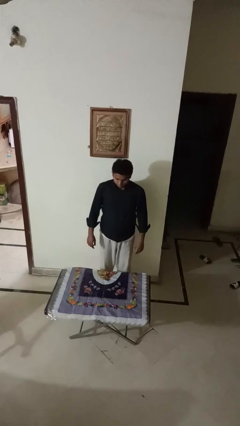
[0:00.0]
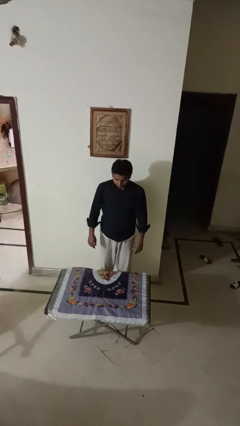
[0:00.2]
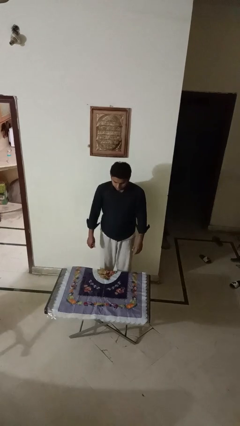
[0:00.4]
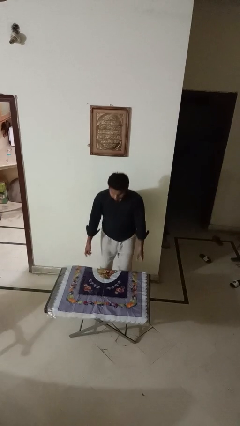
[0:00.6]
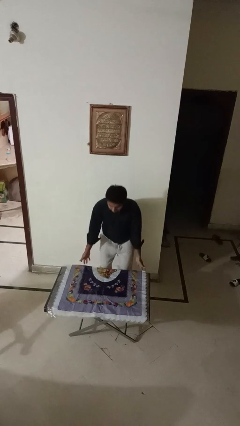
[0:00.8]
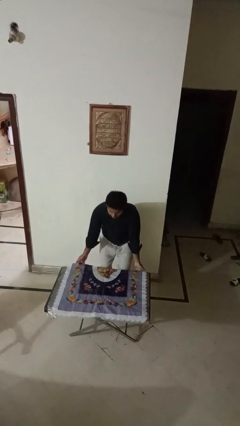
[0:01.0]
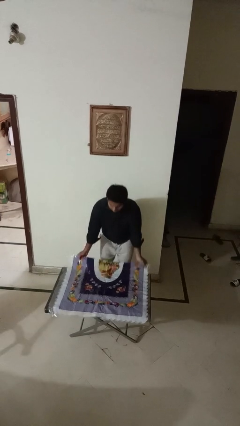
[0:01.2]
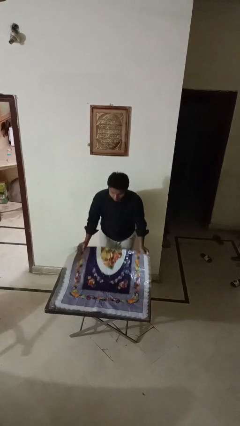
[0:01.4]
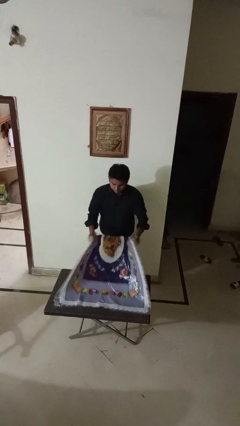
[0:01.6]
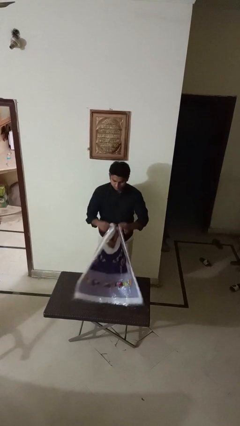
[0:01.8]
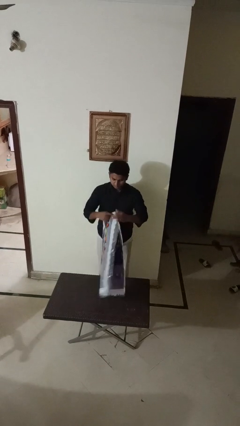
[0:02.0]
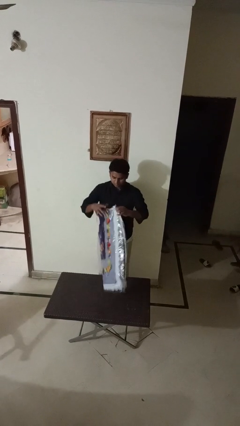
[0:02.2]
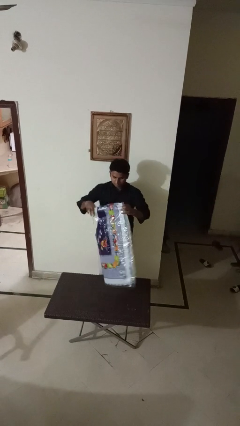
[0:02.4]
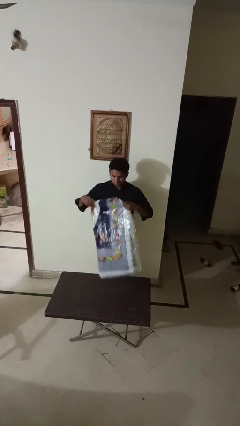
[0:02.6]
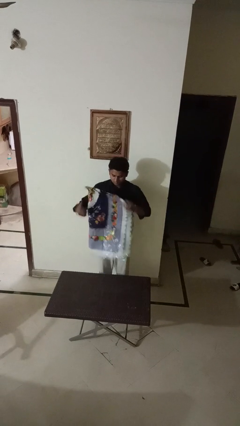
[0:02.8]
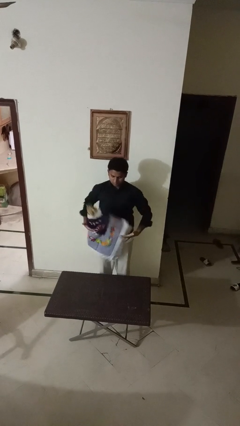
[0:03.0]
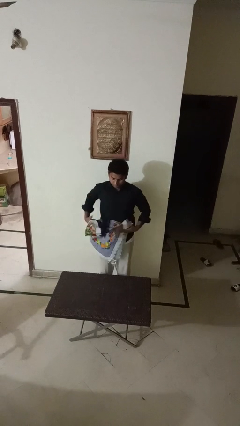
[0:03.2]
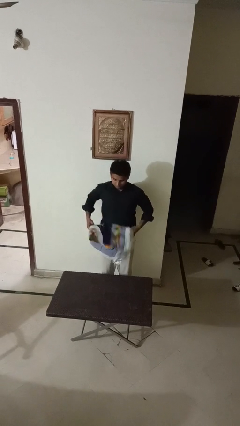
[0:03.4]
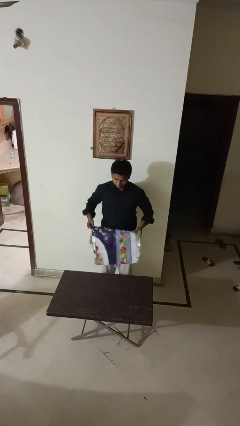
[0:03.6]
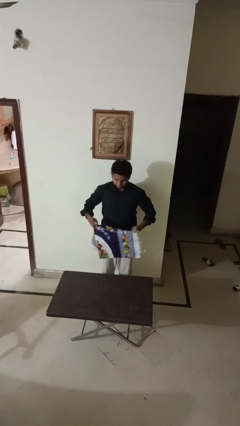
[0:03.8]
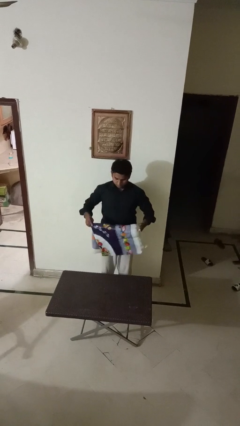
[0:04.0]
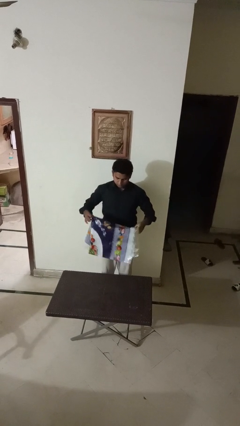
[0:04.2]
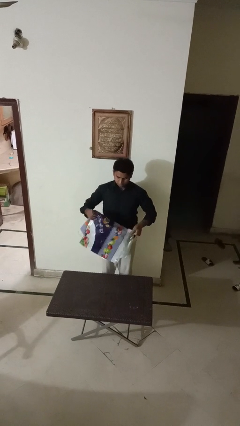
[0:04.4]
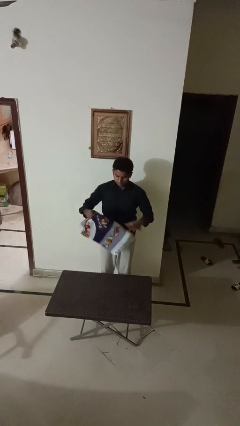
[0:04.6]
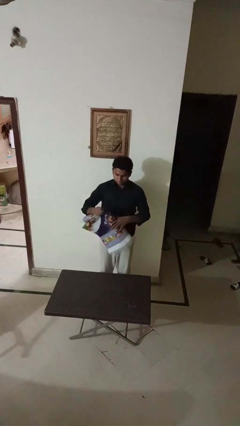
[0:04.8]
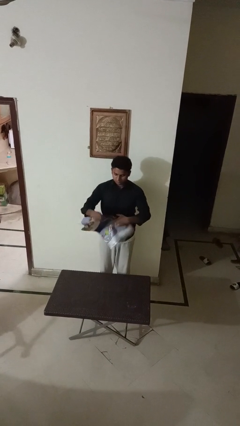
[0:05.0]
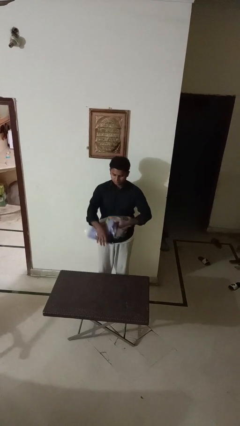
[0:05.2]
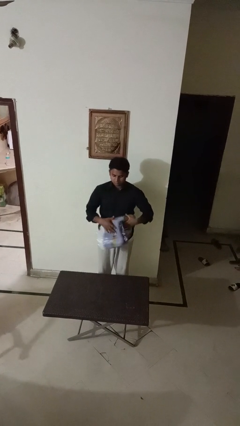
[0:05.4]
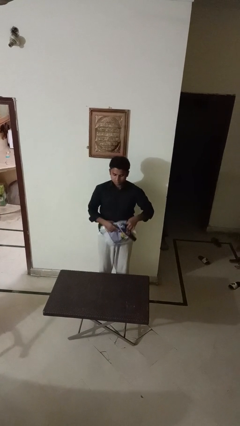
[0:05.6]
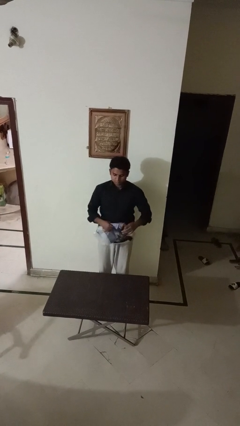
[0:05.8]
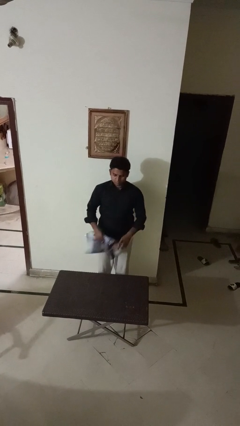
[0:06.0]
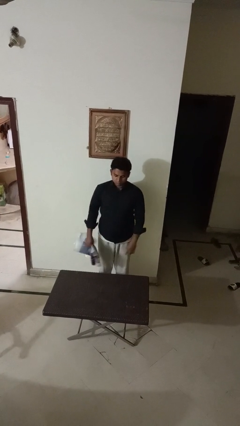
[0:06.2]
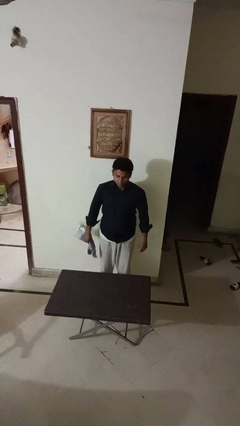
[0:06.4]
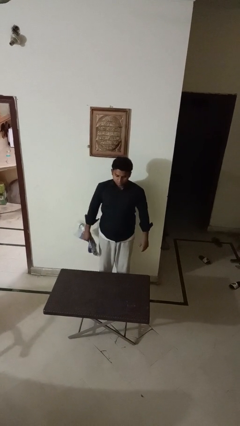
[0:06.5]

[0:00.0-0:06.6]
person folds tablecloth

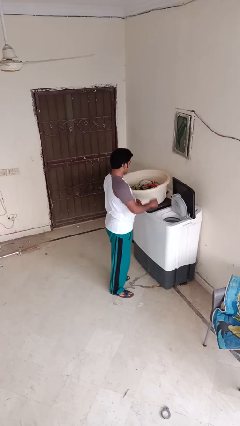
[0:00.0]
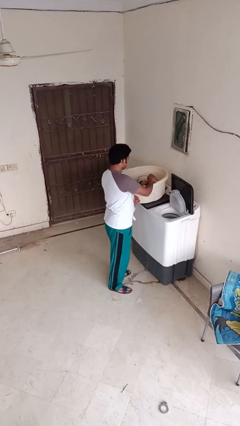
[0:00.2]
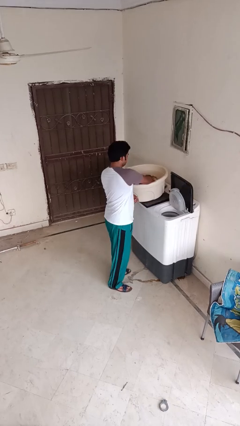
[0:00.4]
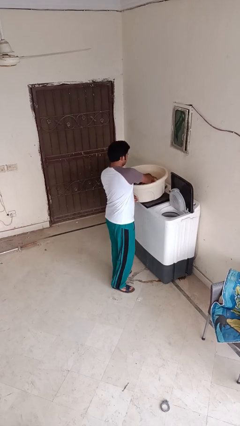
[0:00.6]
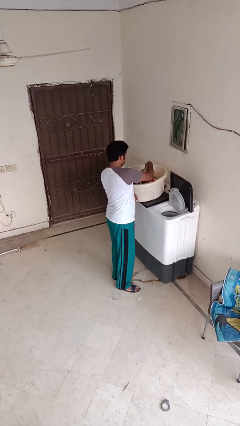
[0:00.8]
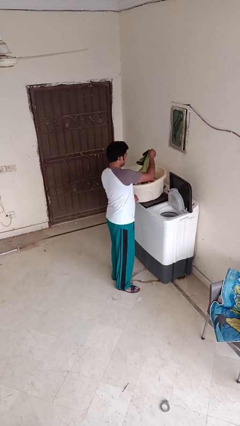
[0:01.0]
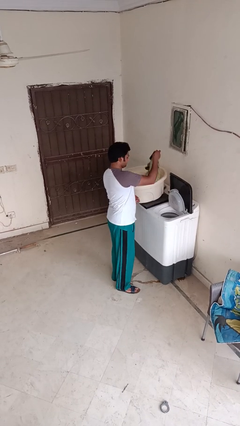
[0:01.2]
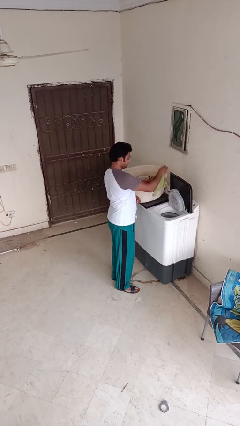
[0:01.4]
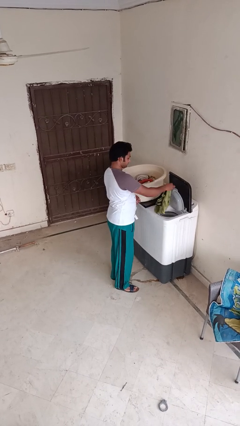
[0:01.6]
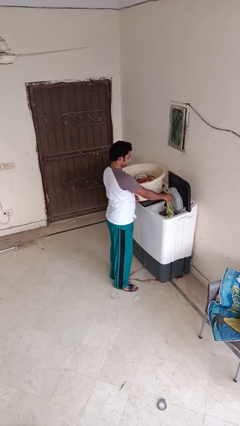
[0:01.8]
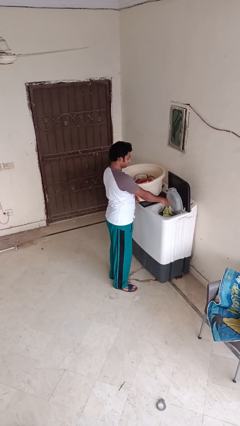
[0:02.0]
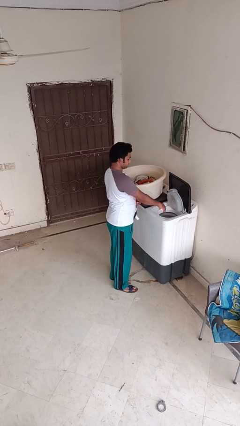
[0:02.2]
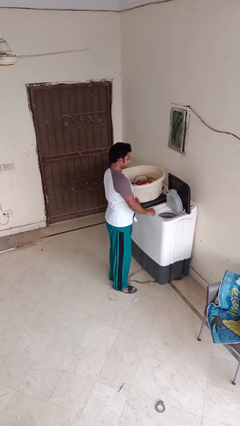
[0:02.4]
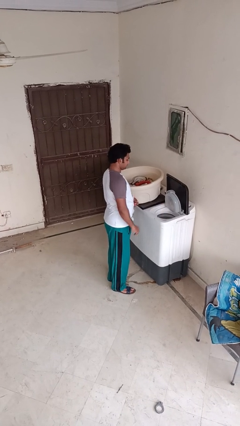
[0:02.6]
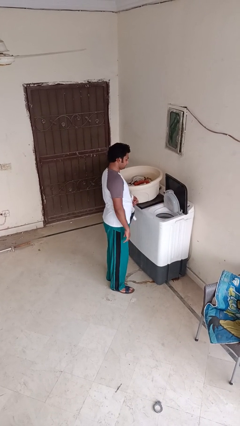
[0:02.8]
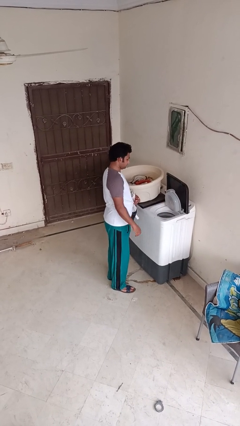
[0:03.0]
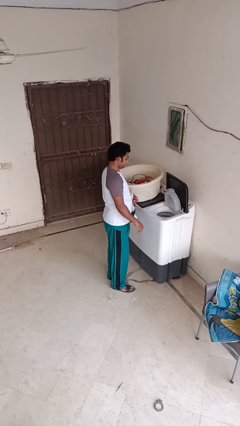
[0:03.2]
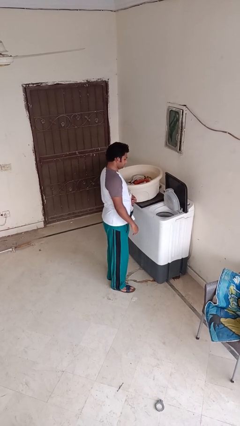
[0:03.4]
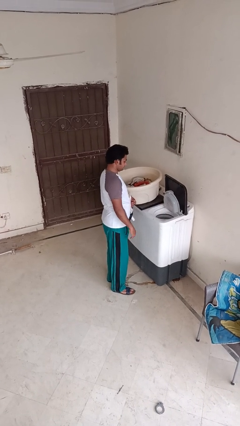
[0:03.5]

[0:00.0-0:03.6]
person loads dryer

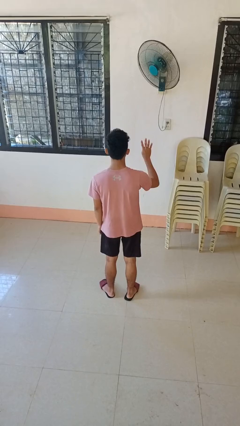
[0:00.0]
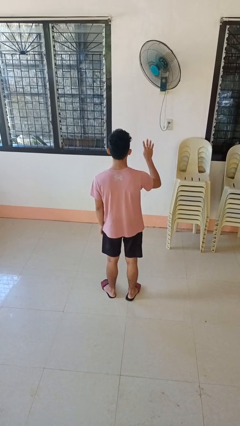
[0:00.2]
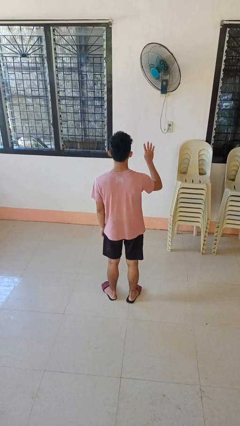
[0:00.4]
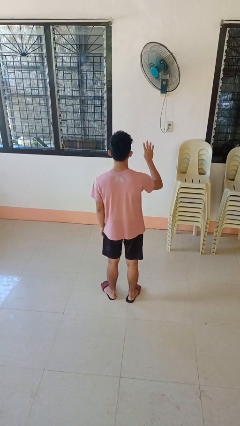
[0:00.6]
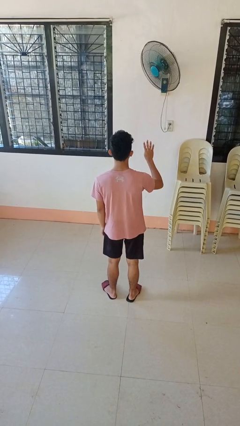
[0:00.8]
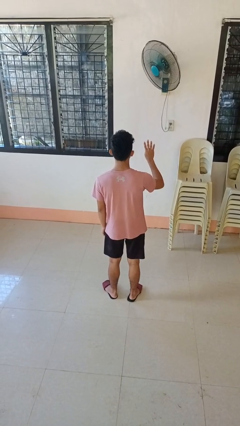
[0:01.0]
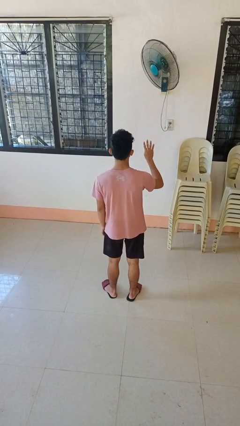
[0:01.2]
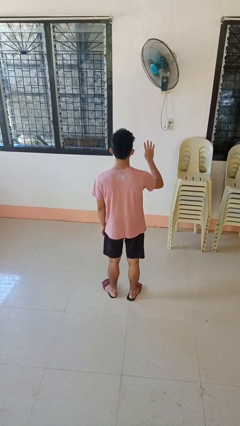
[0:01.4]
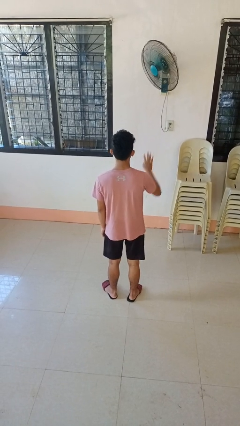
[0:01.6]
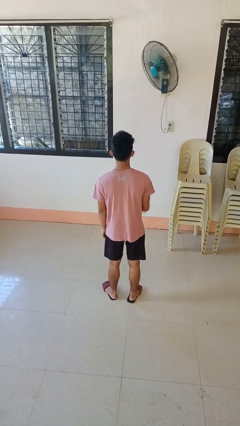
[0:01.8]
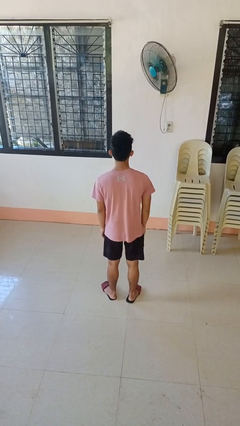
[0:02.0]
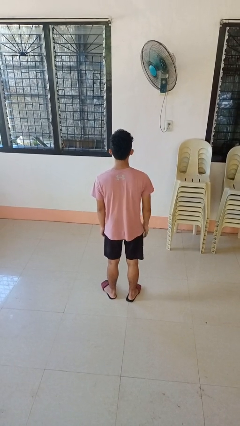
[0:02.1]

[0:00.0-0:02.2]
person gestures number four

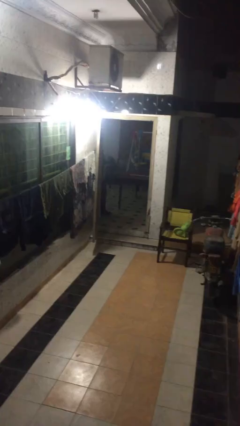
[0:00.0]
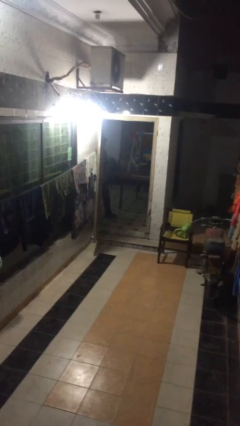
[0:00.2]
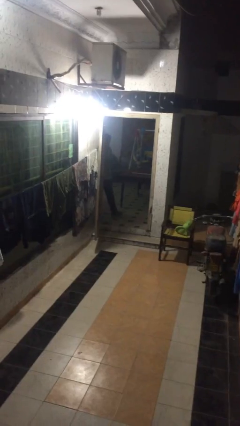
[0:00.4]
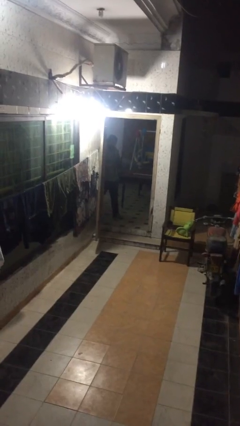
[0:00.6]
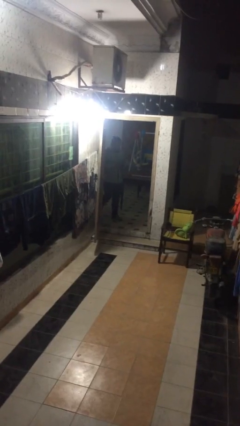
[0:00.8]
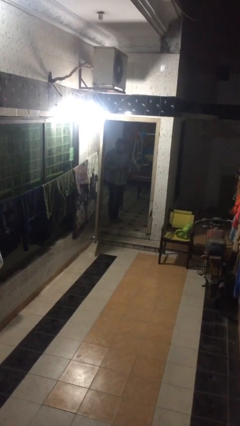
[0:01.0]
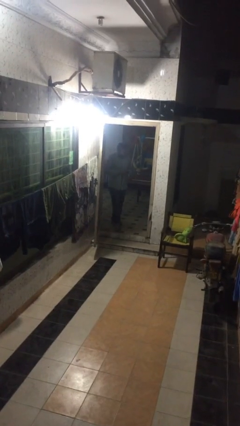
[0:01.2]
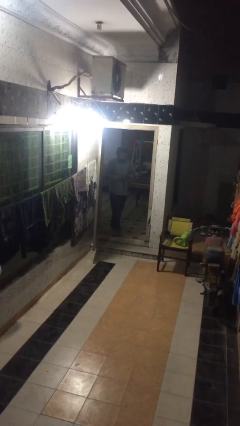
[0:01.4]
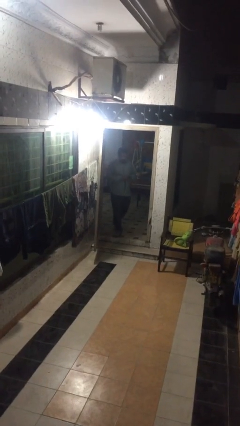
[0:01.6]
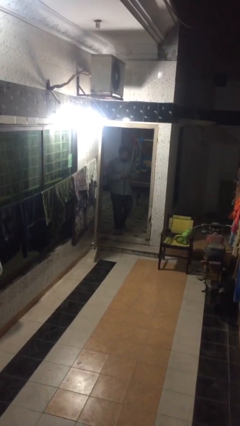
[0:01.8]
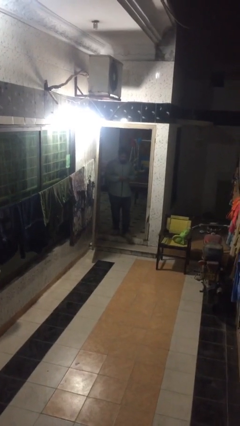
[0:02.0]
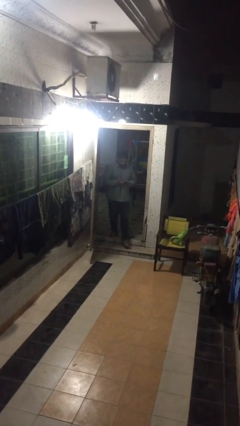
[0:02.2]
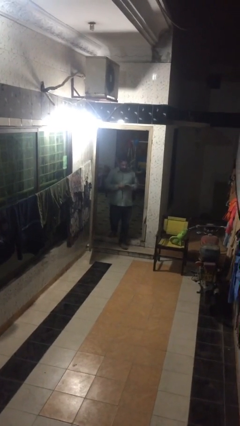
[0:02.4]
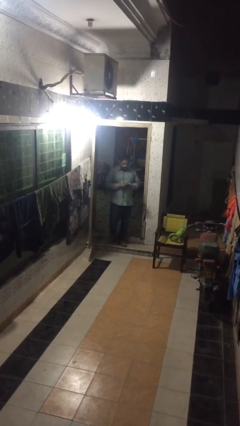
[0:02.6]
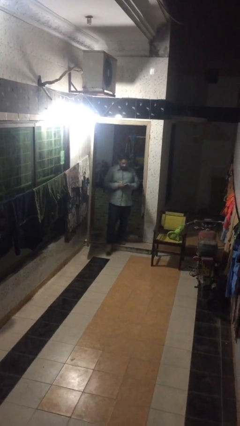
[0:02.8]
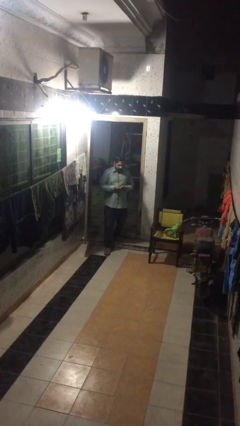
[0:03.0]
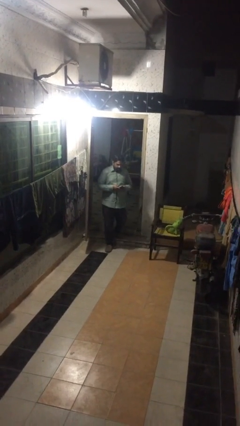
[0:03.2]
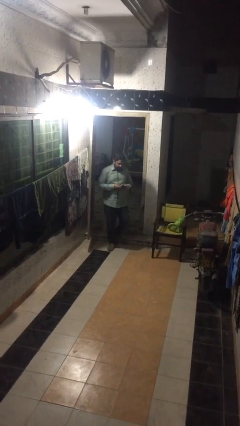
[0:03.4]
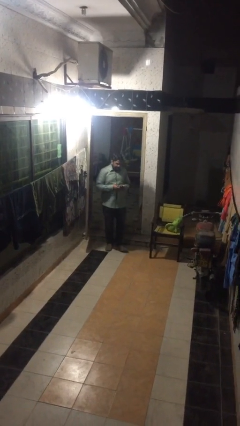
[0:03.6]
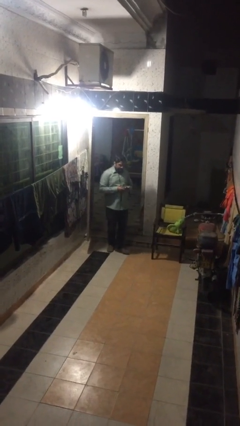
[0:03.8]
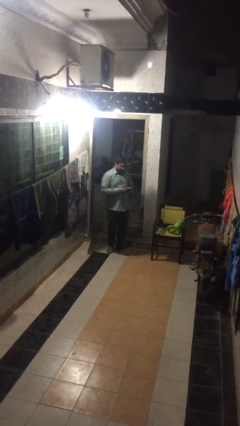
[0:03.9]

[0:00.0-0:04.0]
person enters scene through structure

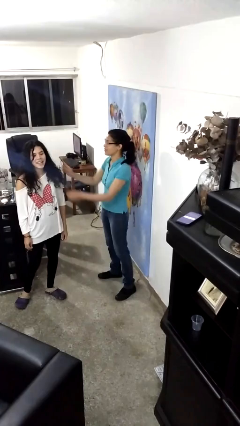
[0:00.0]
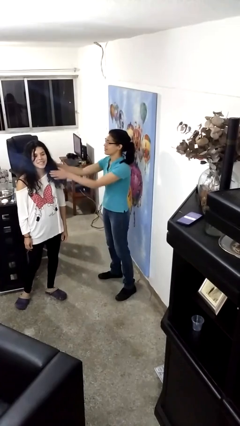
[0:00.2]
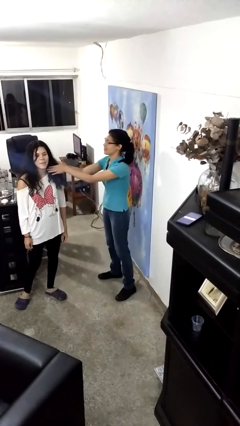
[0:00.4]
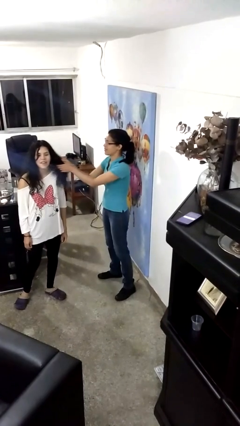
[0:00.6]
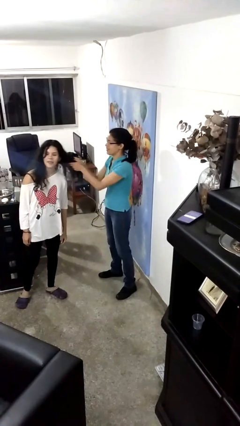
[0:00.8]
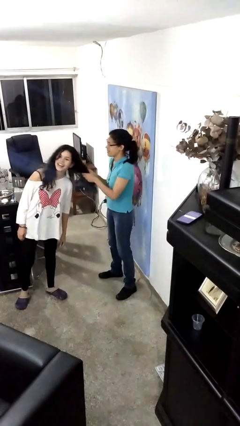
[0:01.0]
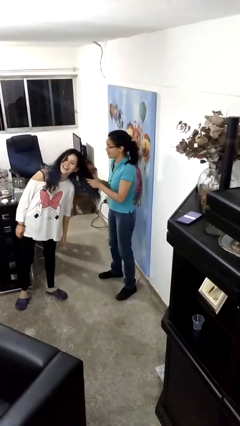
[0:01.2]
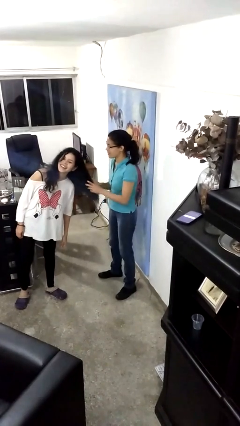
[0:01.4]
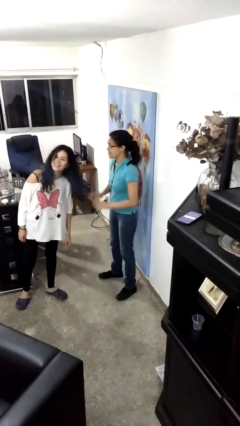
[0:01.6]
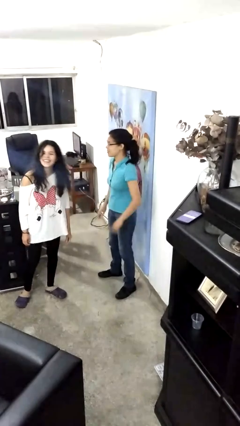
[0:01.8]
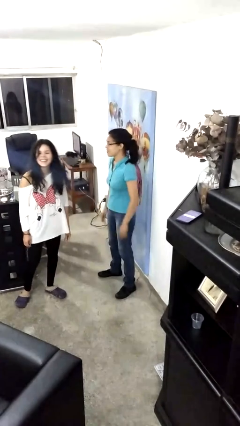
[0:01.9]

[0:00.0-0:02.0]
person grabs person by hair
